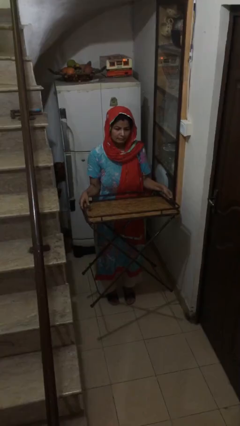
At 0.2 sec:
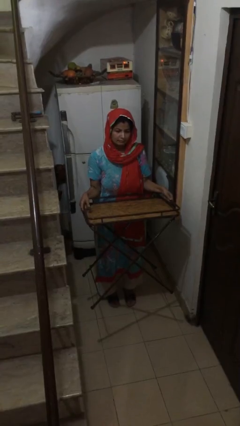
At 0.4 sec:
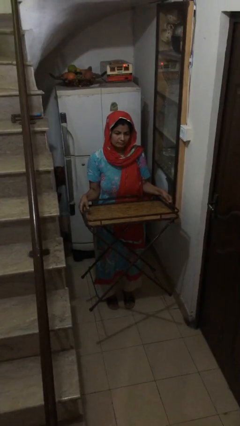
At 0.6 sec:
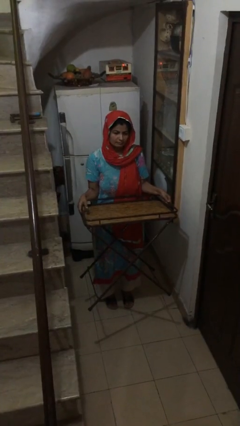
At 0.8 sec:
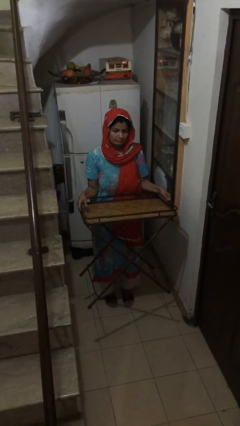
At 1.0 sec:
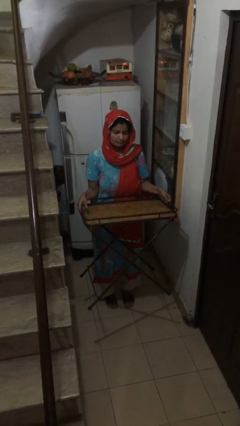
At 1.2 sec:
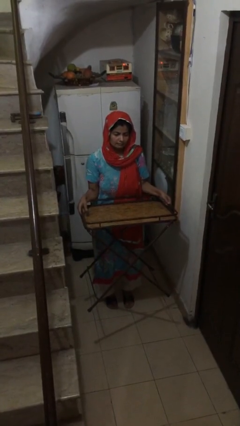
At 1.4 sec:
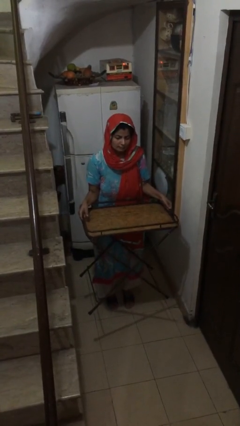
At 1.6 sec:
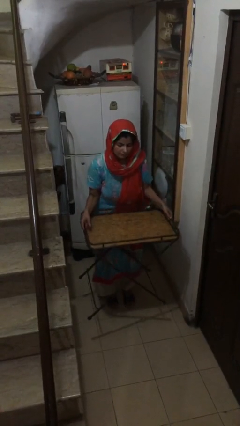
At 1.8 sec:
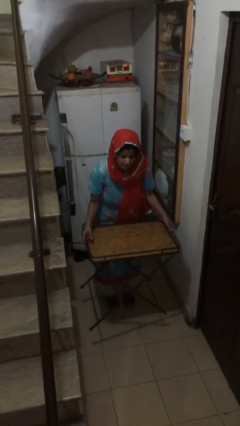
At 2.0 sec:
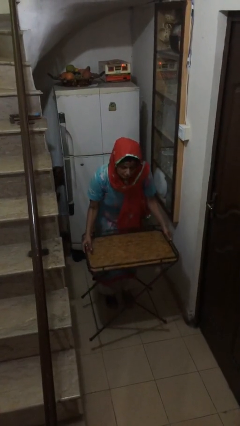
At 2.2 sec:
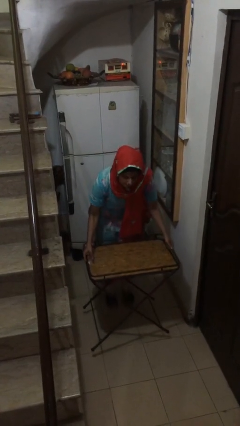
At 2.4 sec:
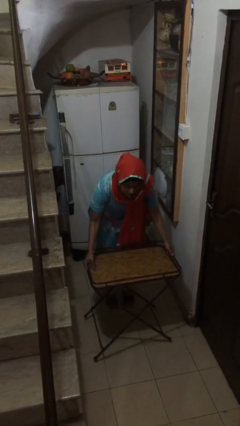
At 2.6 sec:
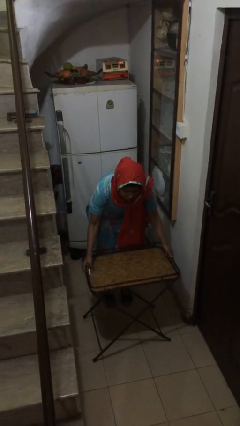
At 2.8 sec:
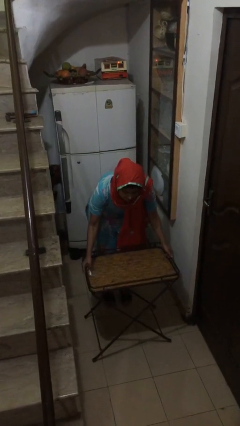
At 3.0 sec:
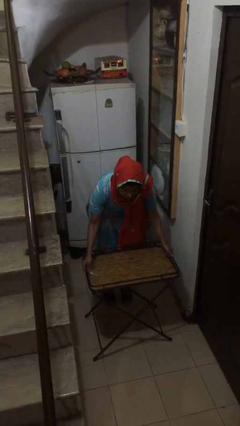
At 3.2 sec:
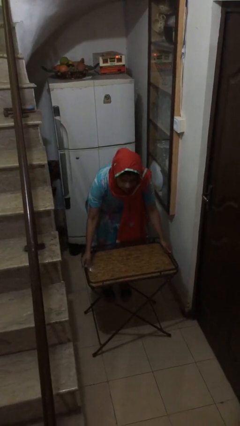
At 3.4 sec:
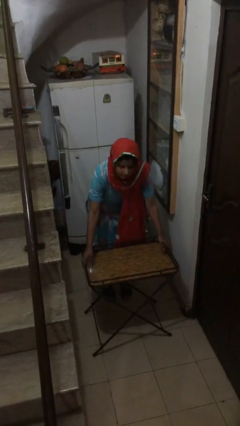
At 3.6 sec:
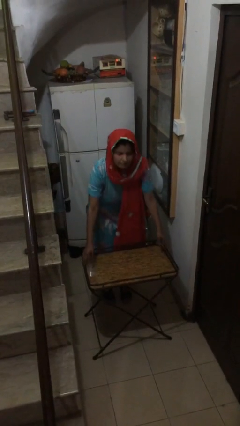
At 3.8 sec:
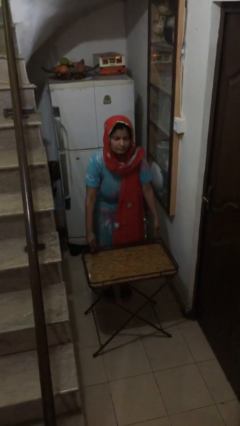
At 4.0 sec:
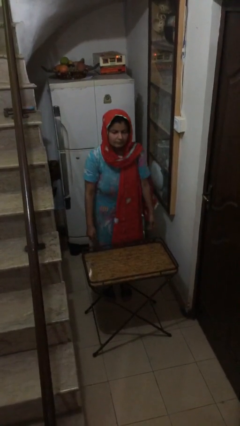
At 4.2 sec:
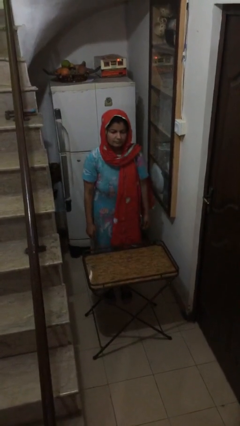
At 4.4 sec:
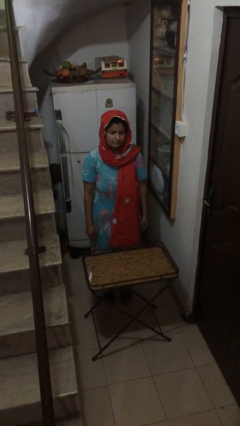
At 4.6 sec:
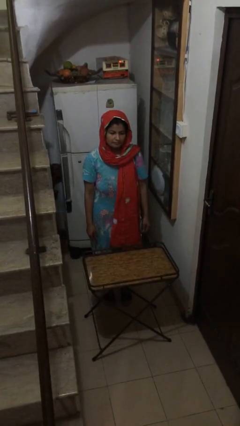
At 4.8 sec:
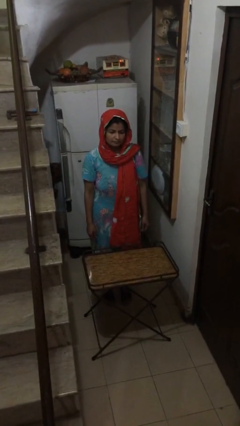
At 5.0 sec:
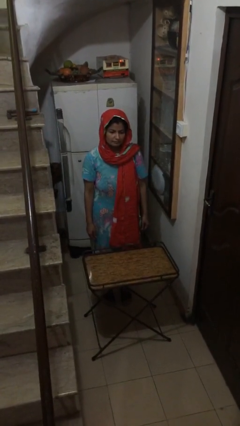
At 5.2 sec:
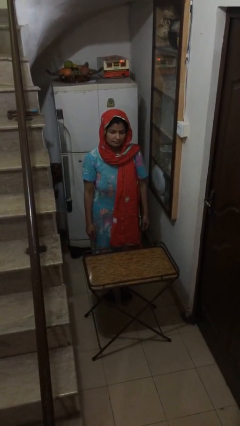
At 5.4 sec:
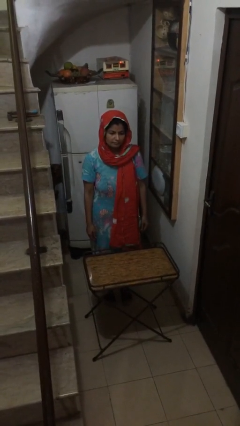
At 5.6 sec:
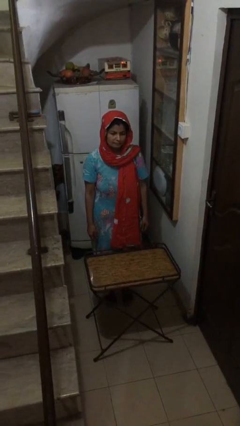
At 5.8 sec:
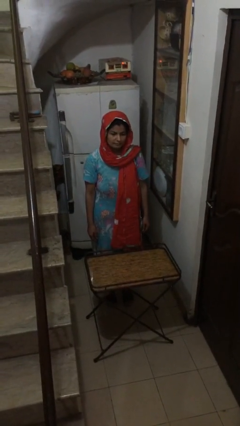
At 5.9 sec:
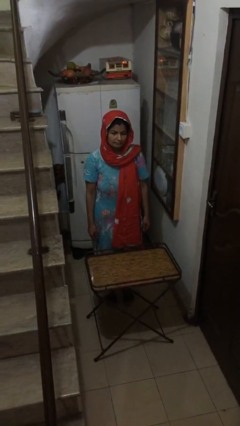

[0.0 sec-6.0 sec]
person puts down object on floor

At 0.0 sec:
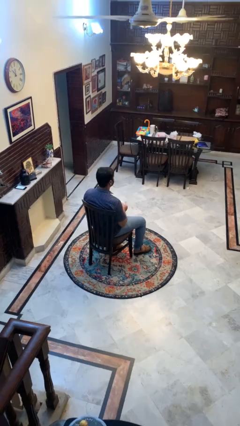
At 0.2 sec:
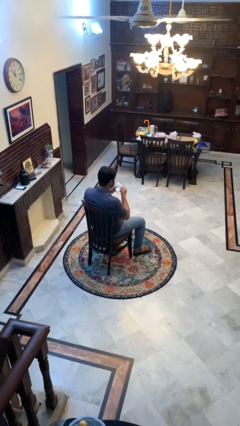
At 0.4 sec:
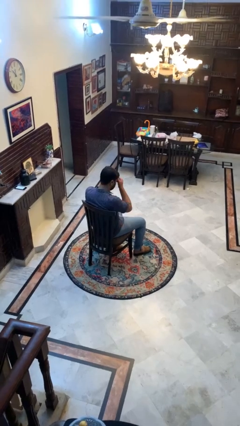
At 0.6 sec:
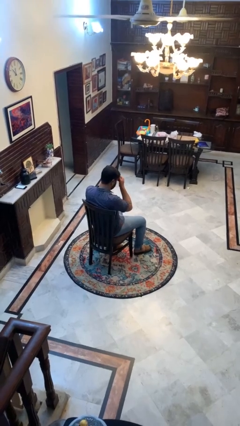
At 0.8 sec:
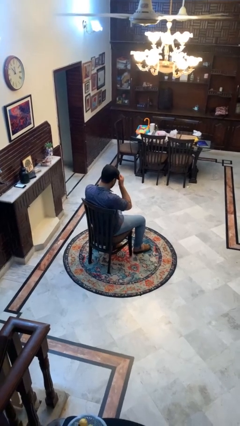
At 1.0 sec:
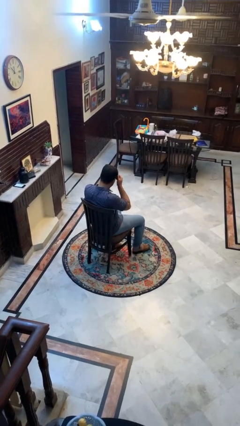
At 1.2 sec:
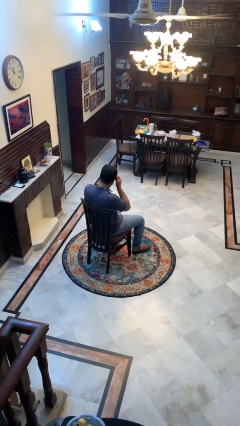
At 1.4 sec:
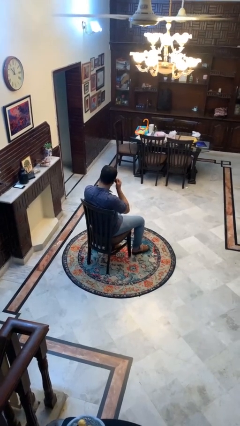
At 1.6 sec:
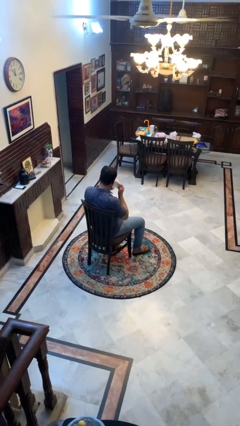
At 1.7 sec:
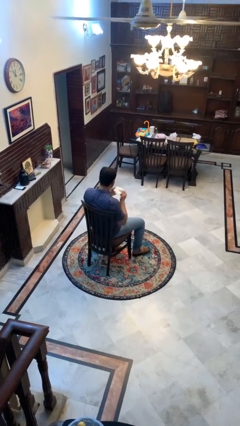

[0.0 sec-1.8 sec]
person wipes mouth with napkin

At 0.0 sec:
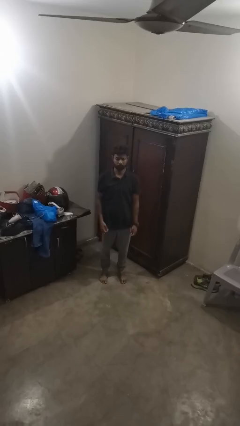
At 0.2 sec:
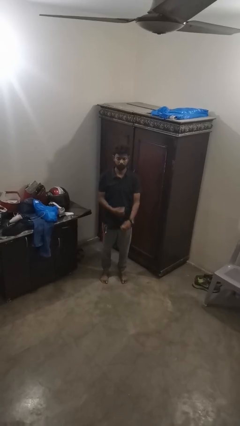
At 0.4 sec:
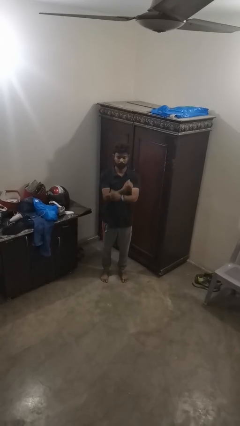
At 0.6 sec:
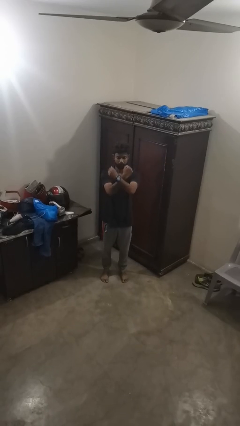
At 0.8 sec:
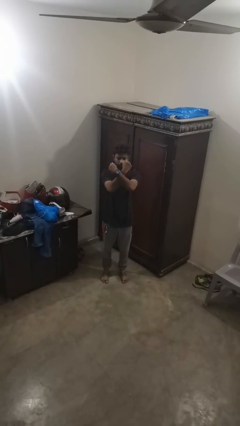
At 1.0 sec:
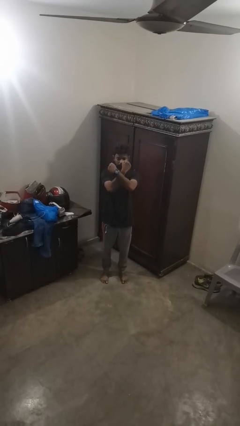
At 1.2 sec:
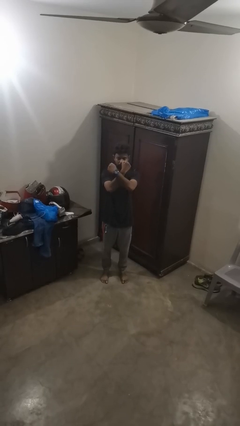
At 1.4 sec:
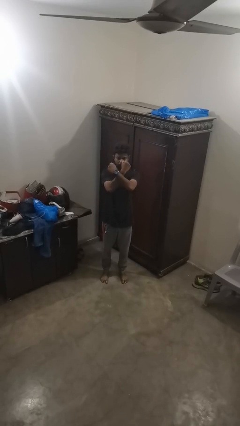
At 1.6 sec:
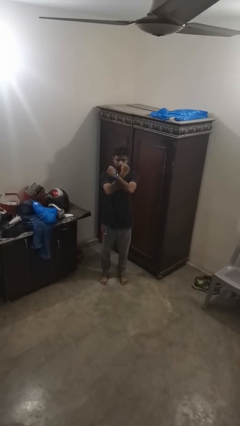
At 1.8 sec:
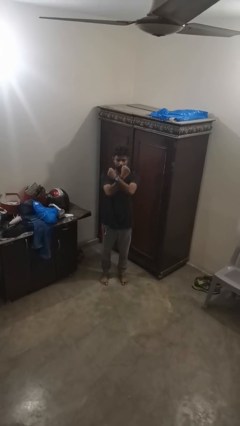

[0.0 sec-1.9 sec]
person gestures arms x

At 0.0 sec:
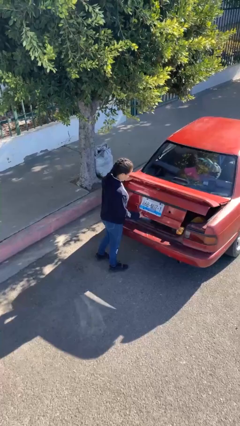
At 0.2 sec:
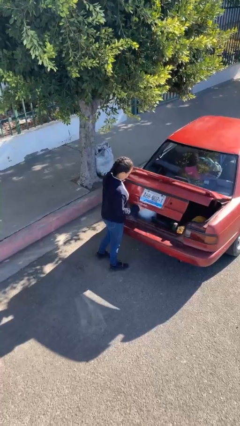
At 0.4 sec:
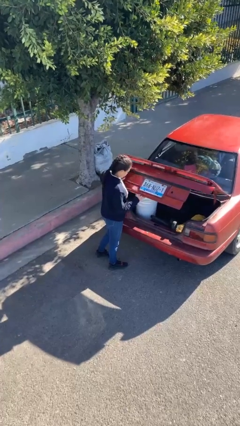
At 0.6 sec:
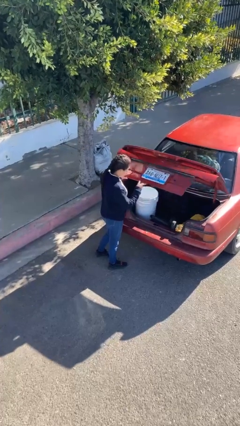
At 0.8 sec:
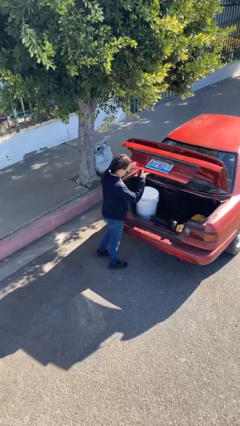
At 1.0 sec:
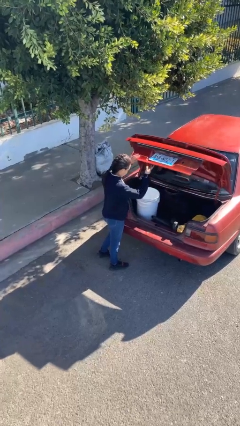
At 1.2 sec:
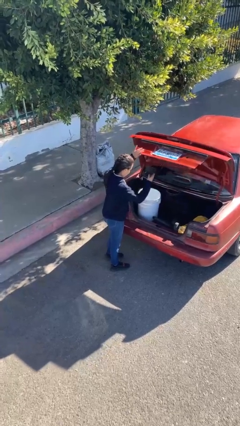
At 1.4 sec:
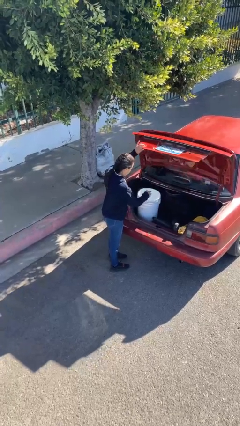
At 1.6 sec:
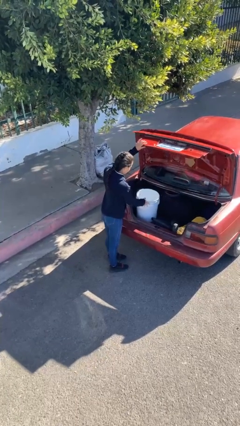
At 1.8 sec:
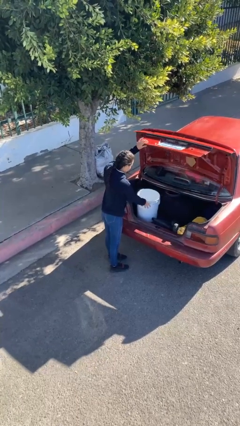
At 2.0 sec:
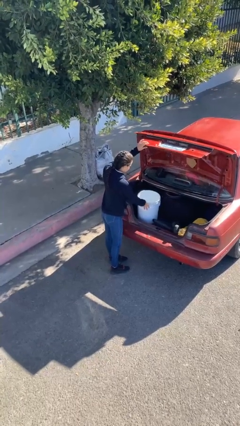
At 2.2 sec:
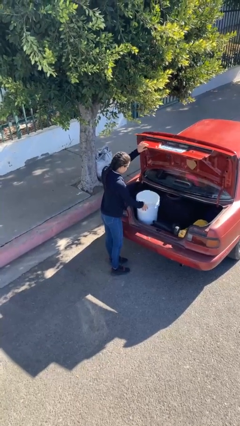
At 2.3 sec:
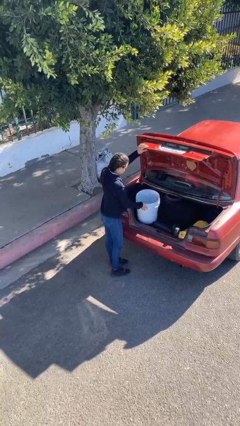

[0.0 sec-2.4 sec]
person opens car trunk

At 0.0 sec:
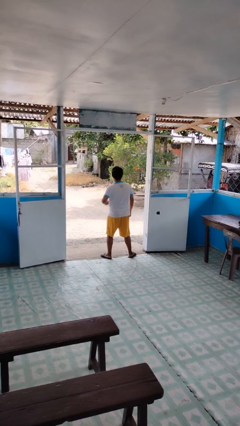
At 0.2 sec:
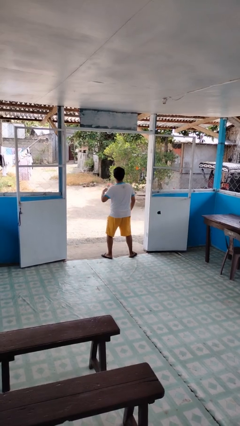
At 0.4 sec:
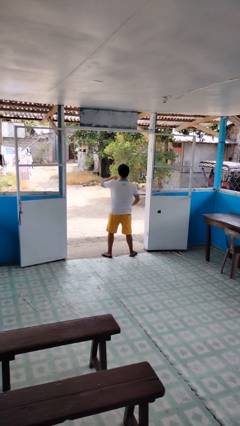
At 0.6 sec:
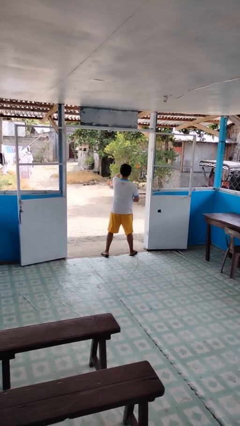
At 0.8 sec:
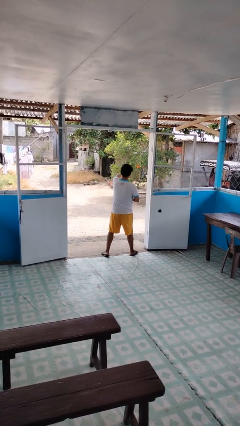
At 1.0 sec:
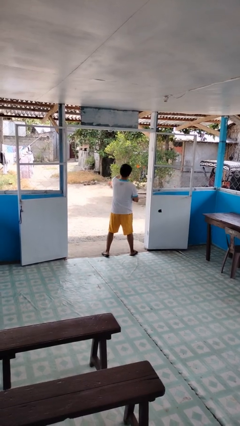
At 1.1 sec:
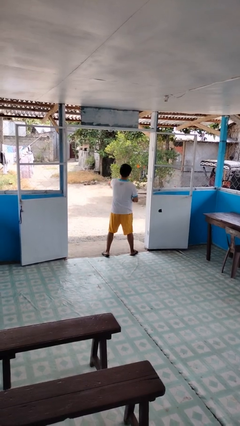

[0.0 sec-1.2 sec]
person punches

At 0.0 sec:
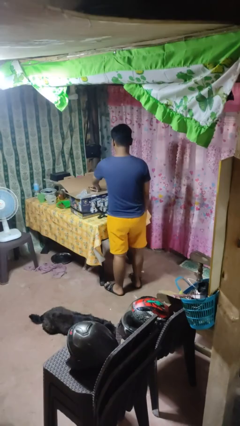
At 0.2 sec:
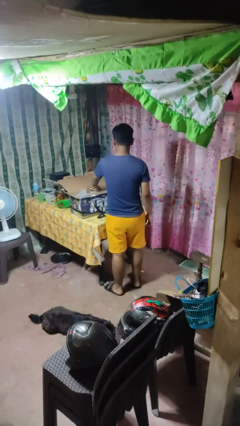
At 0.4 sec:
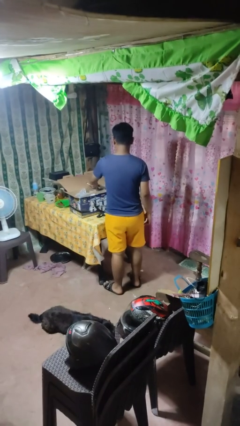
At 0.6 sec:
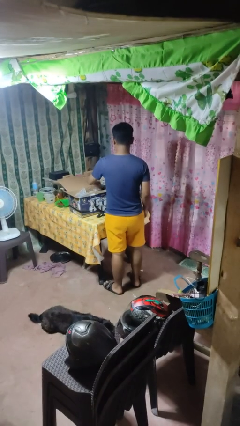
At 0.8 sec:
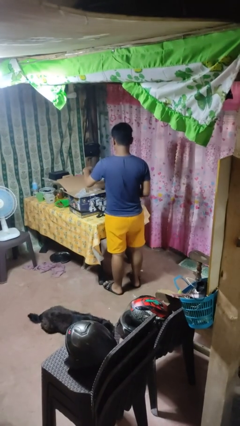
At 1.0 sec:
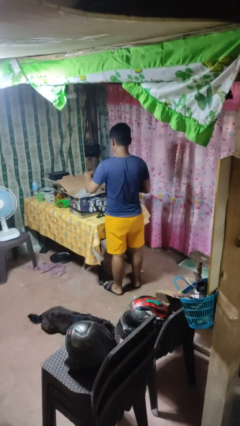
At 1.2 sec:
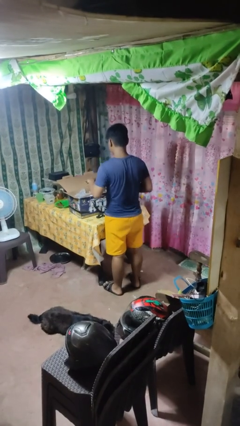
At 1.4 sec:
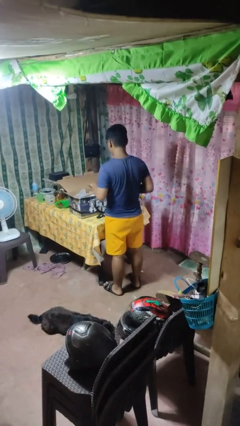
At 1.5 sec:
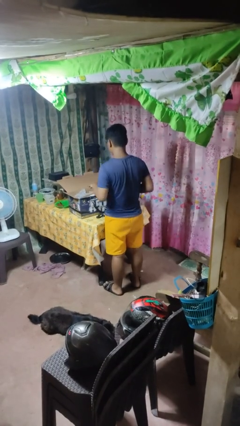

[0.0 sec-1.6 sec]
person takes object from box

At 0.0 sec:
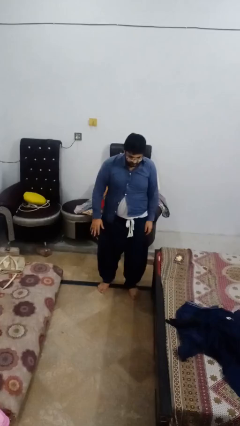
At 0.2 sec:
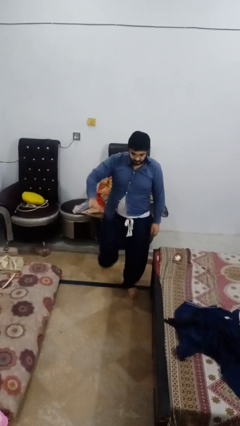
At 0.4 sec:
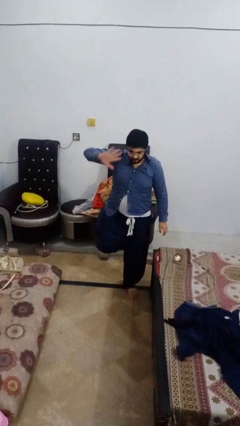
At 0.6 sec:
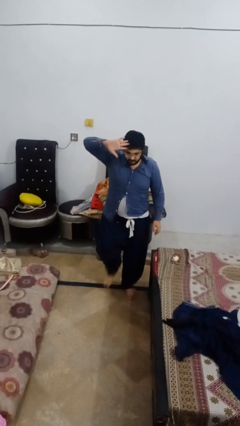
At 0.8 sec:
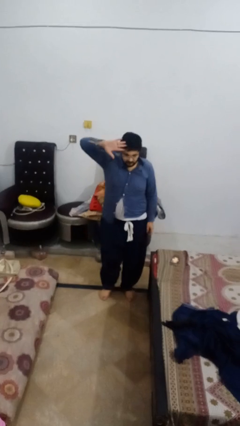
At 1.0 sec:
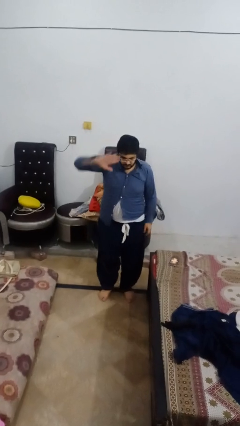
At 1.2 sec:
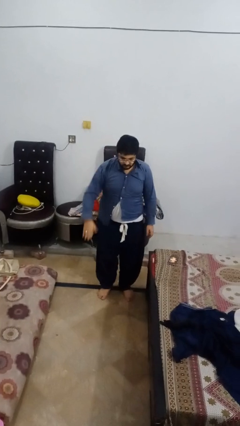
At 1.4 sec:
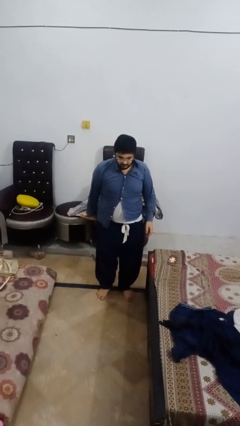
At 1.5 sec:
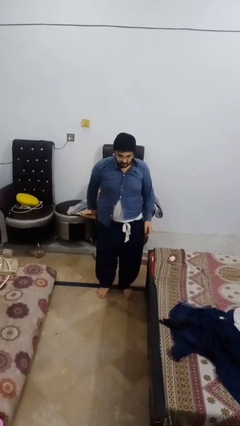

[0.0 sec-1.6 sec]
person salutes

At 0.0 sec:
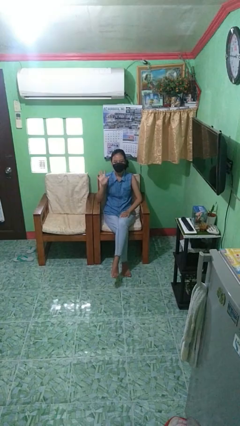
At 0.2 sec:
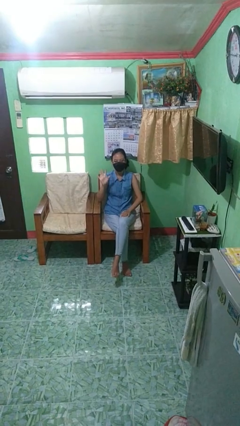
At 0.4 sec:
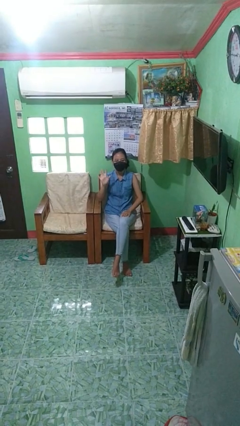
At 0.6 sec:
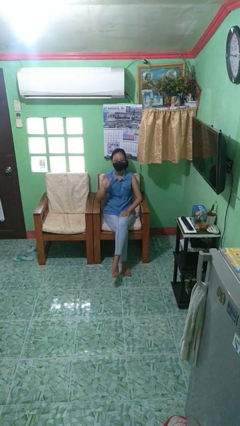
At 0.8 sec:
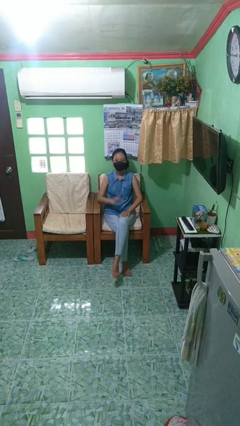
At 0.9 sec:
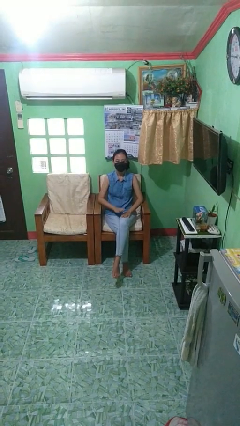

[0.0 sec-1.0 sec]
person gestures number five
